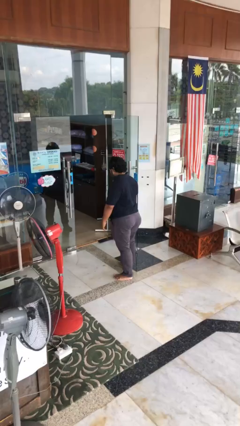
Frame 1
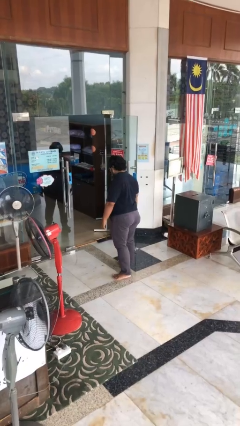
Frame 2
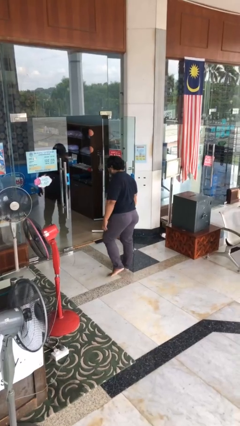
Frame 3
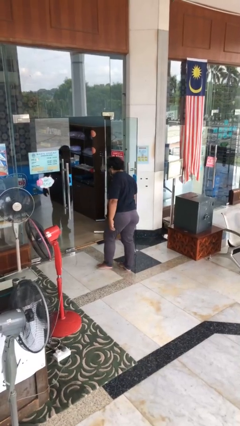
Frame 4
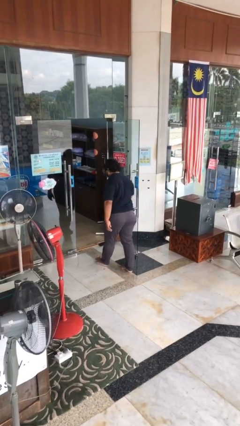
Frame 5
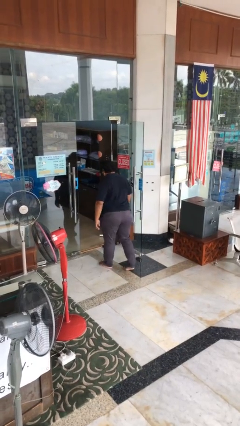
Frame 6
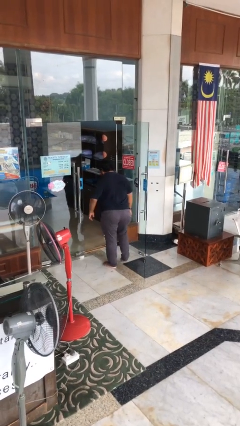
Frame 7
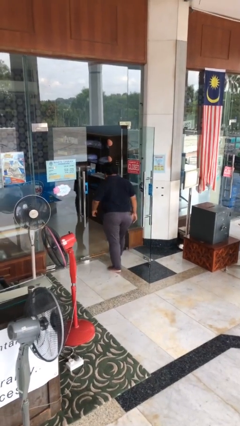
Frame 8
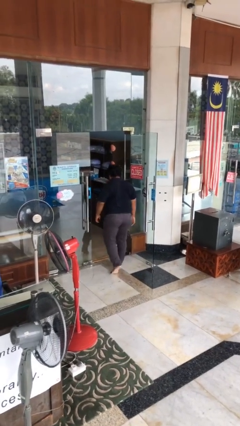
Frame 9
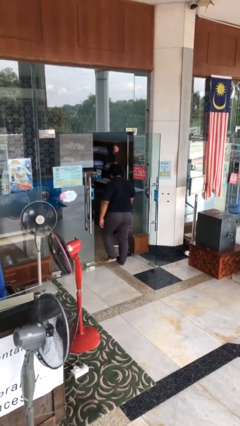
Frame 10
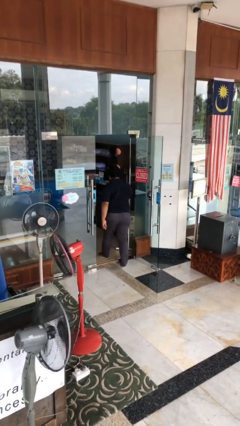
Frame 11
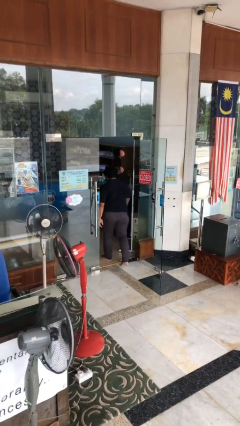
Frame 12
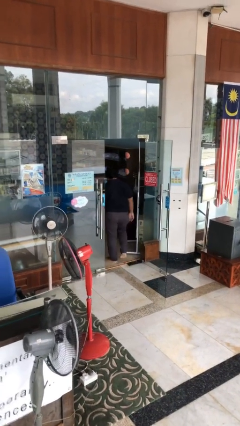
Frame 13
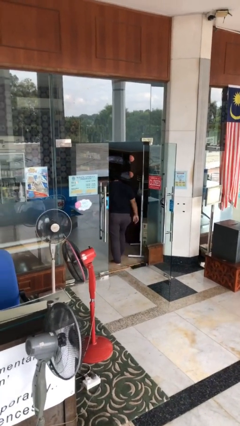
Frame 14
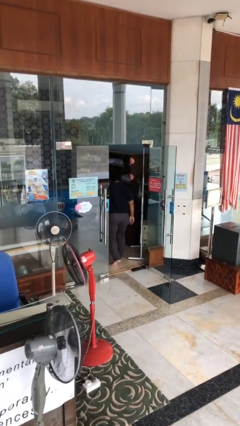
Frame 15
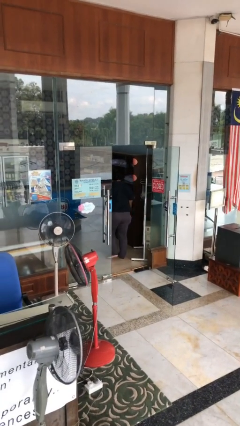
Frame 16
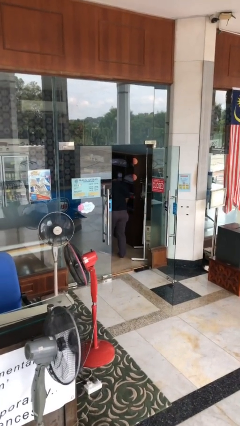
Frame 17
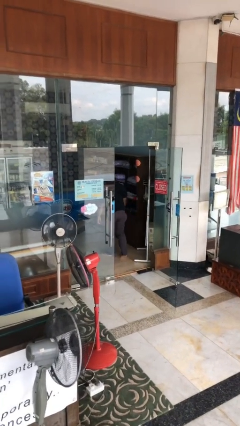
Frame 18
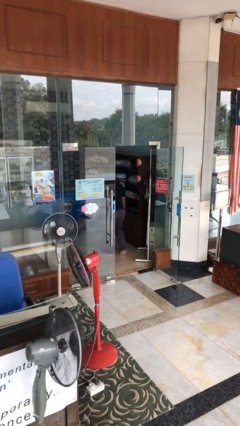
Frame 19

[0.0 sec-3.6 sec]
person exits scene through structure

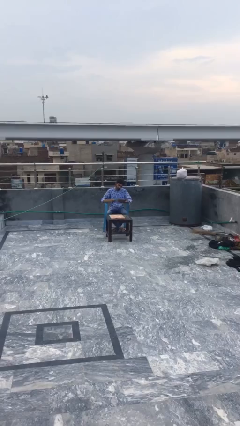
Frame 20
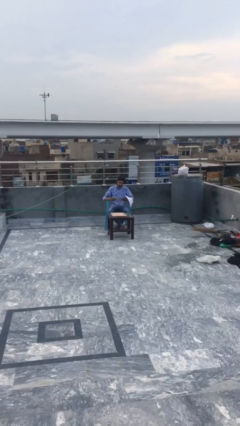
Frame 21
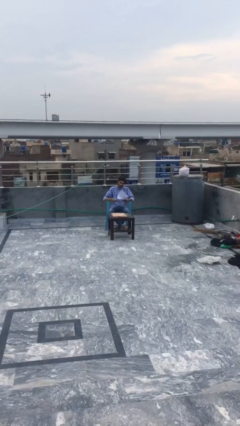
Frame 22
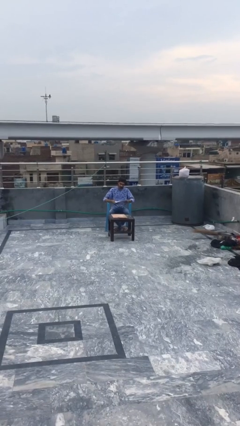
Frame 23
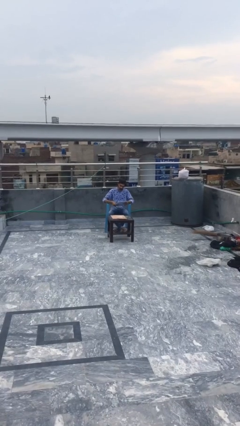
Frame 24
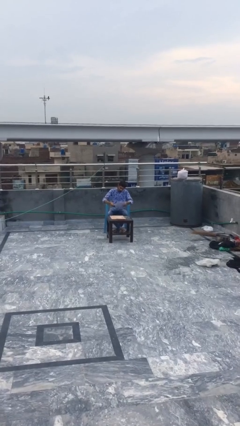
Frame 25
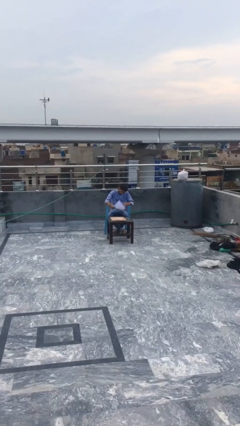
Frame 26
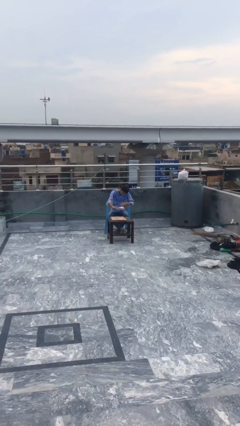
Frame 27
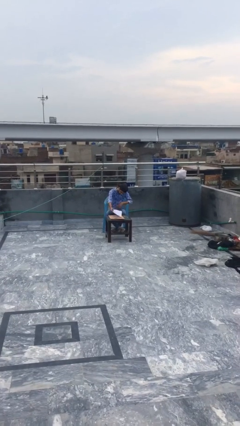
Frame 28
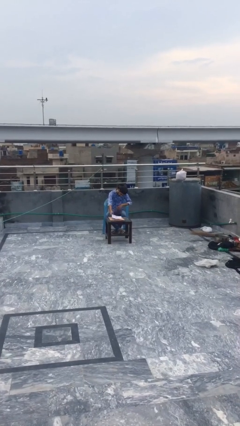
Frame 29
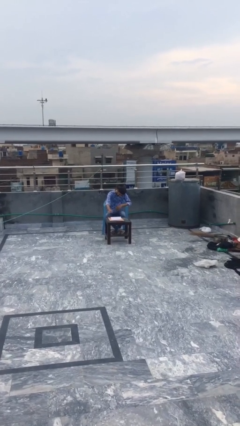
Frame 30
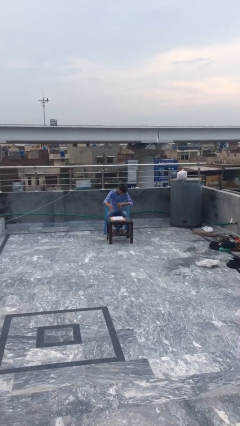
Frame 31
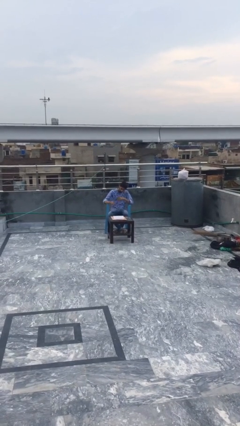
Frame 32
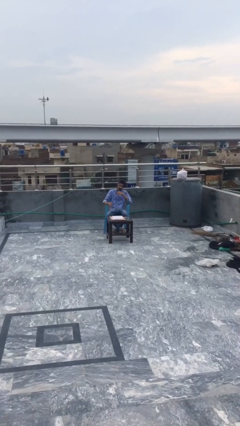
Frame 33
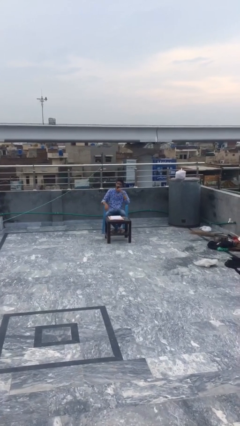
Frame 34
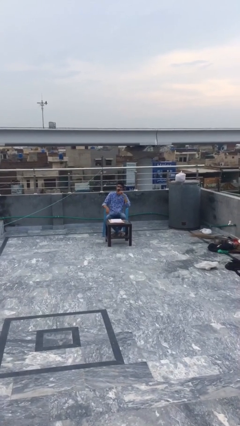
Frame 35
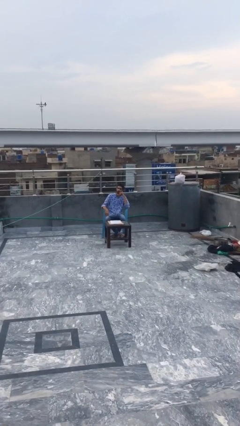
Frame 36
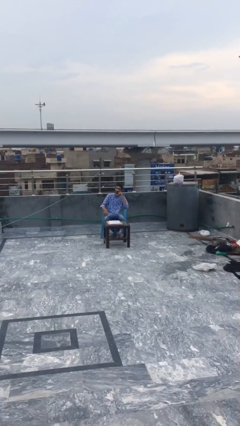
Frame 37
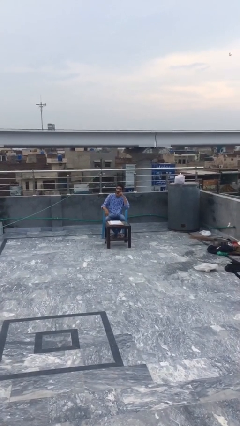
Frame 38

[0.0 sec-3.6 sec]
person puts down object on table

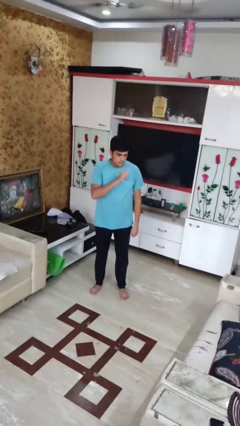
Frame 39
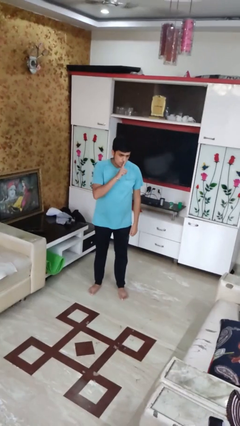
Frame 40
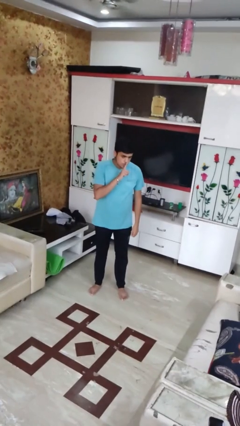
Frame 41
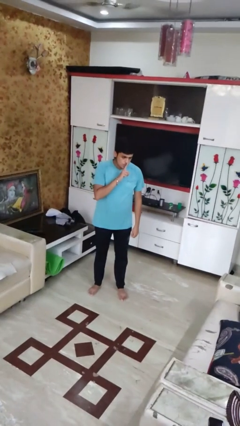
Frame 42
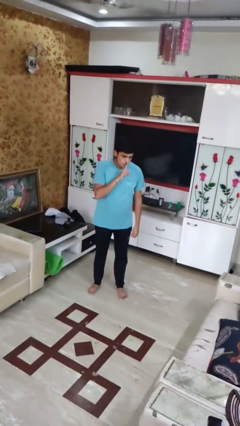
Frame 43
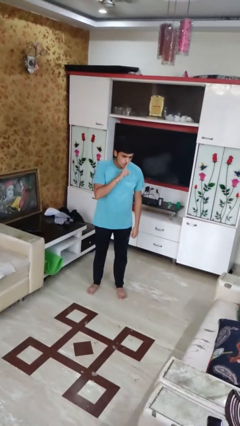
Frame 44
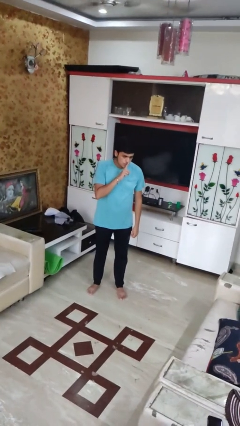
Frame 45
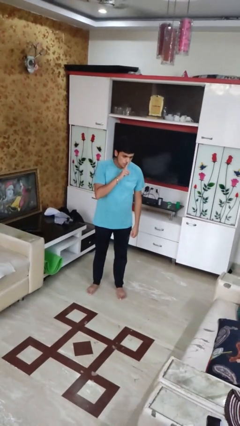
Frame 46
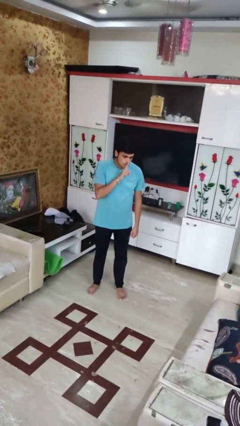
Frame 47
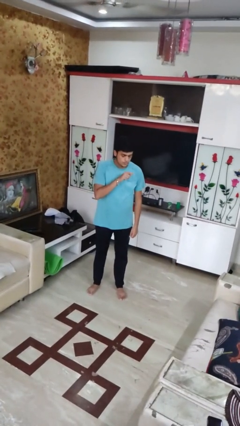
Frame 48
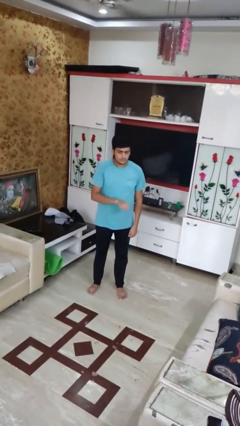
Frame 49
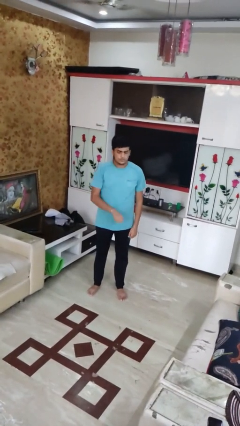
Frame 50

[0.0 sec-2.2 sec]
person gestures be quiet

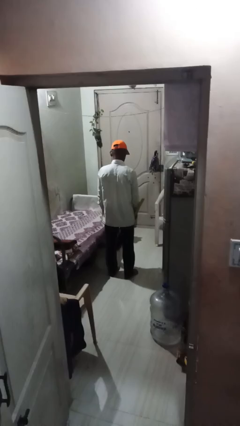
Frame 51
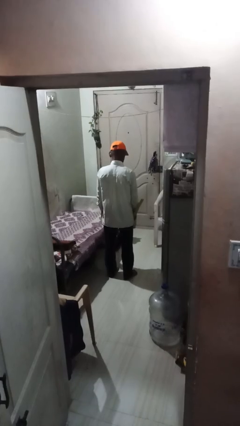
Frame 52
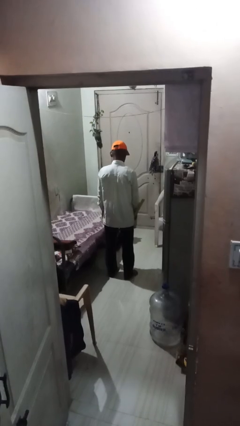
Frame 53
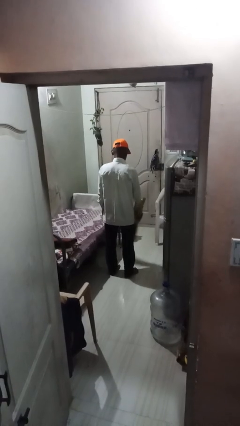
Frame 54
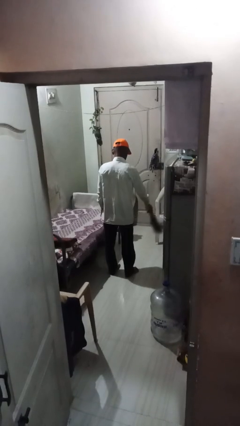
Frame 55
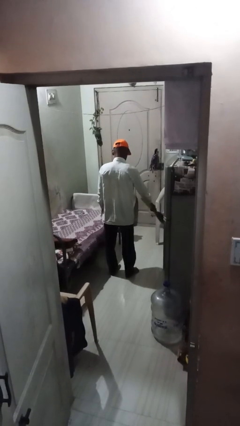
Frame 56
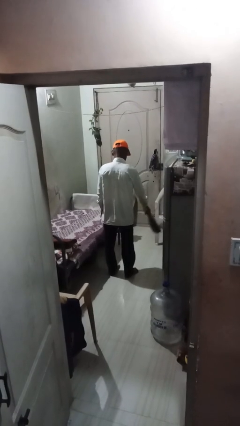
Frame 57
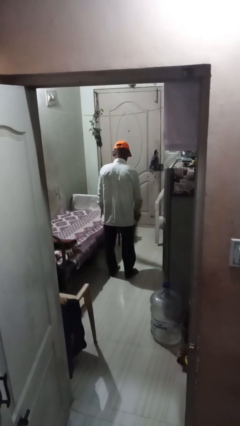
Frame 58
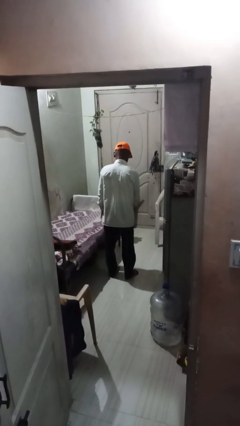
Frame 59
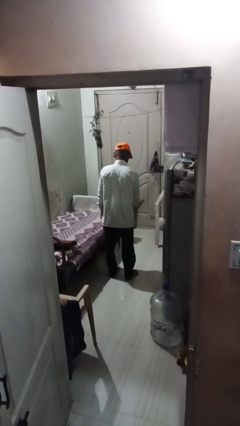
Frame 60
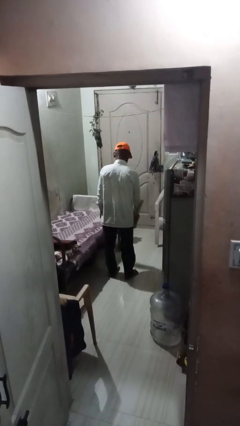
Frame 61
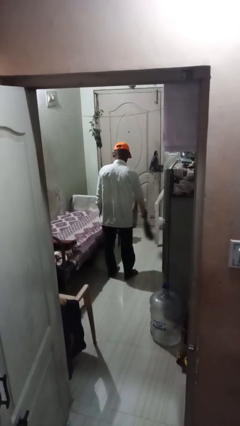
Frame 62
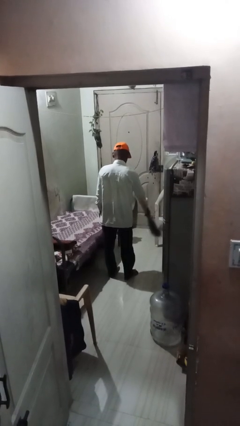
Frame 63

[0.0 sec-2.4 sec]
person mops

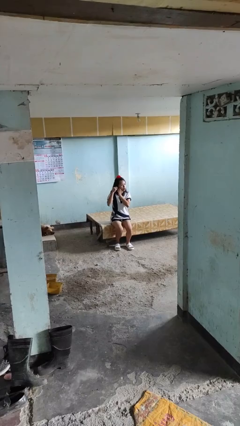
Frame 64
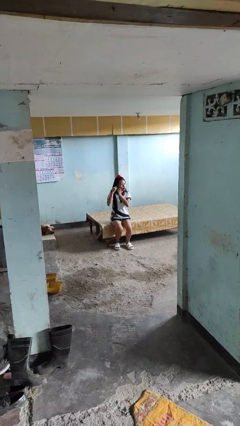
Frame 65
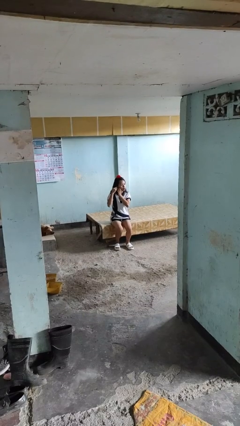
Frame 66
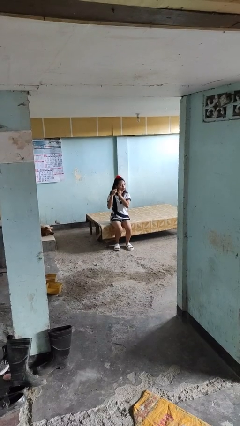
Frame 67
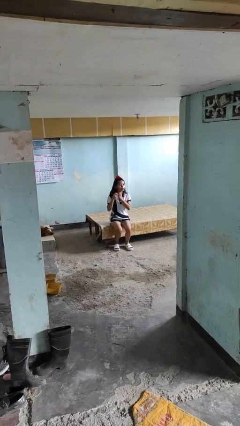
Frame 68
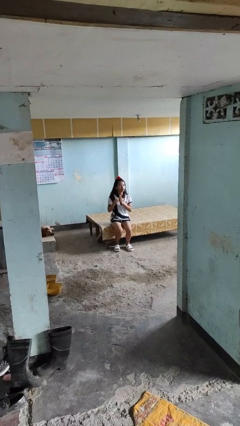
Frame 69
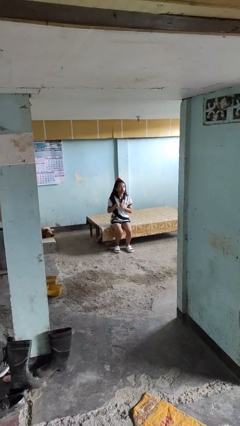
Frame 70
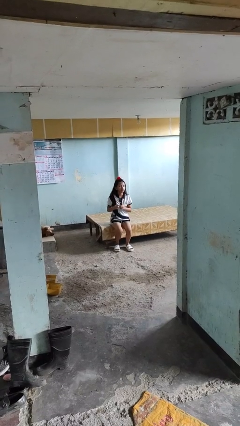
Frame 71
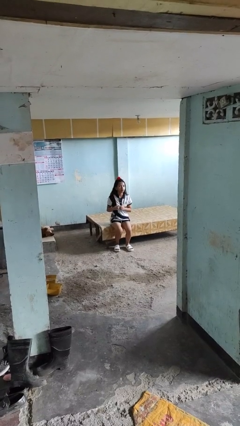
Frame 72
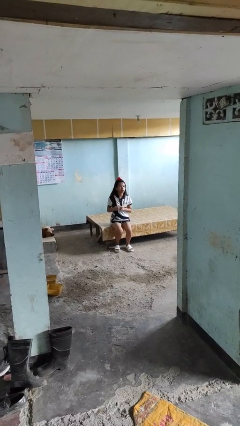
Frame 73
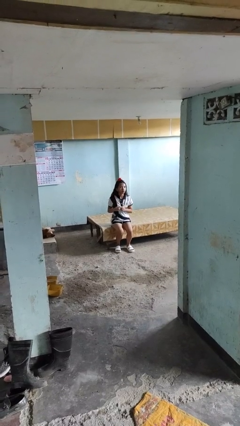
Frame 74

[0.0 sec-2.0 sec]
person takes off earrings

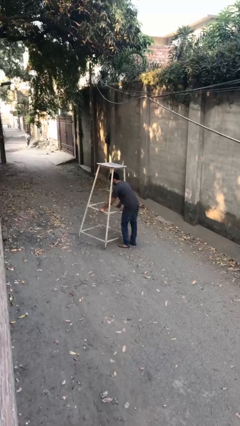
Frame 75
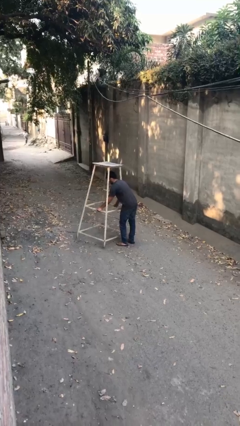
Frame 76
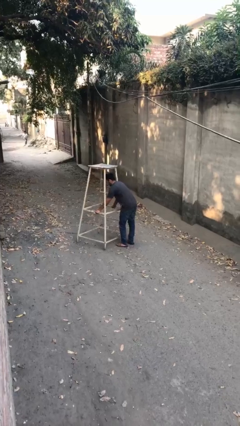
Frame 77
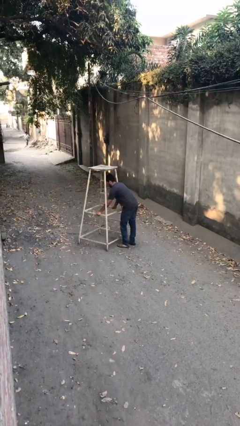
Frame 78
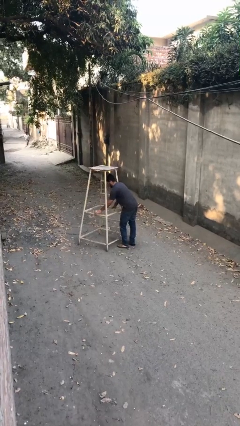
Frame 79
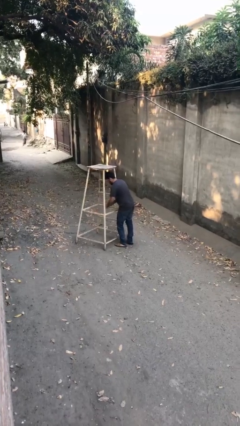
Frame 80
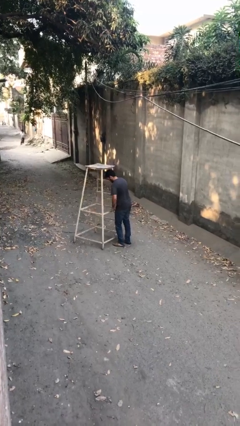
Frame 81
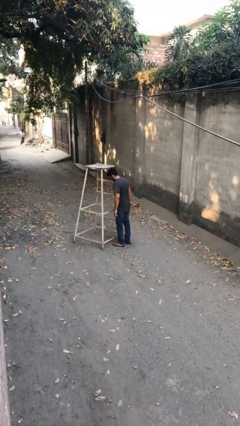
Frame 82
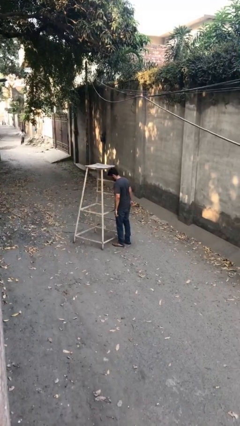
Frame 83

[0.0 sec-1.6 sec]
person puts down object on floor

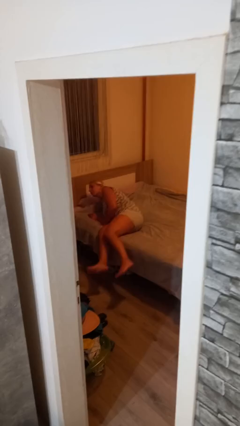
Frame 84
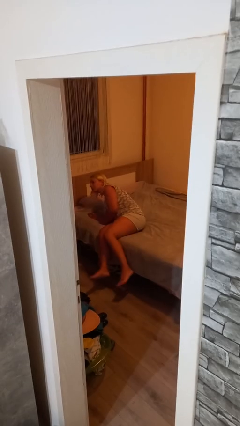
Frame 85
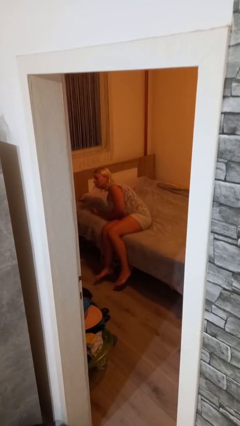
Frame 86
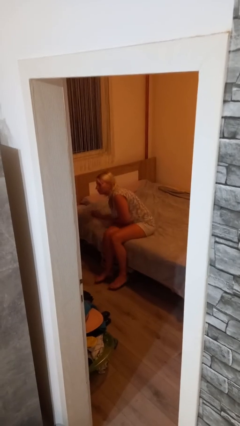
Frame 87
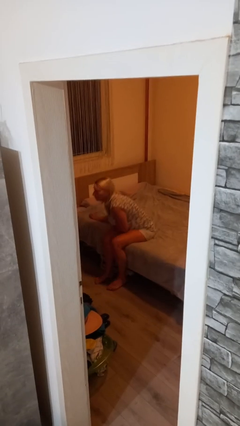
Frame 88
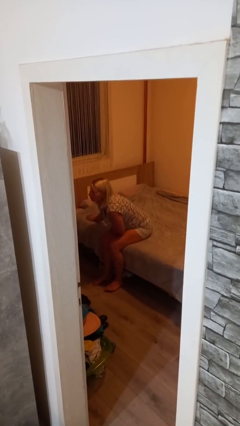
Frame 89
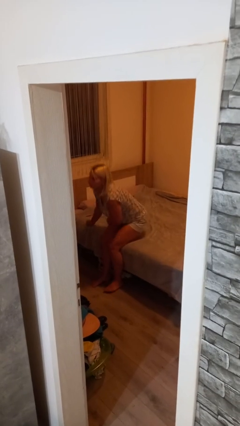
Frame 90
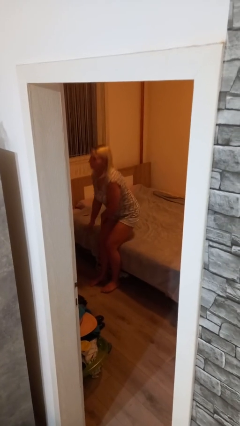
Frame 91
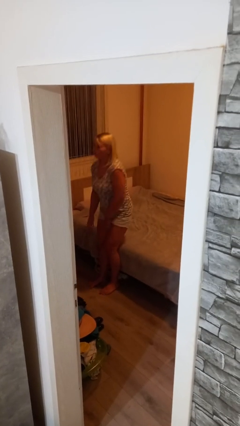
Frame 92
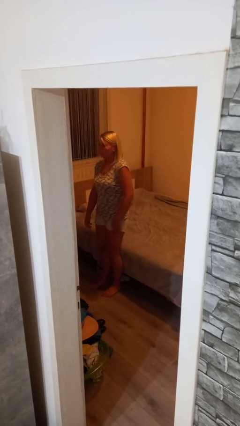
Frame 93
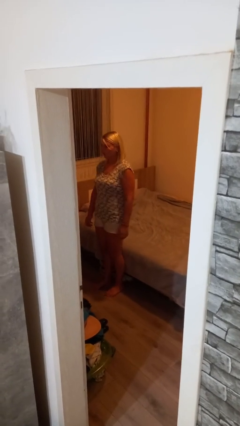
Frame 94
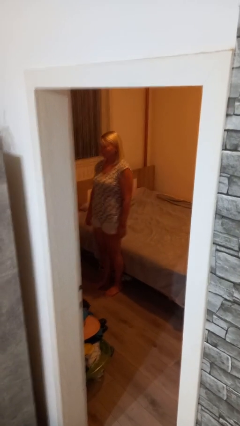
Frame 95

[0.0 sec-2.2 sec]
person stands up
